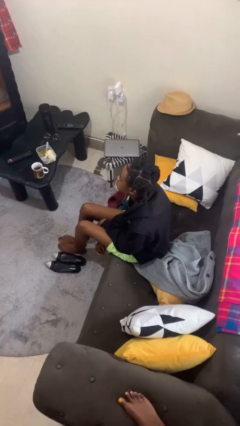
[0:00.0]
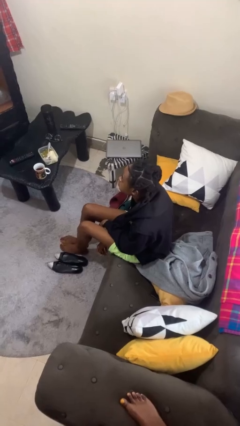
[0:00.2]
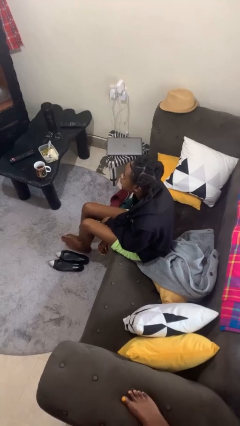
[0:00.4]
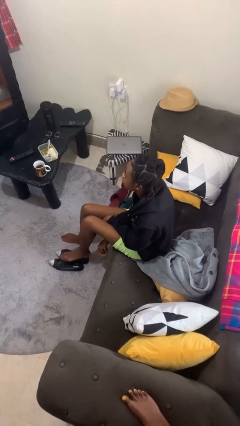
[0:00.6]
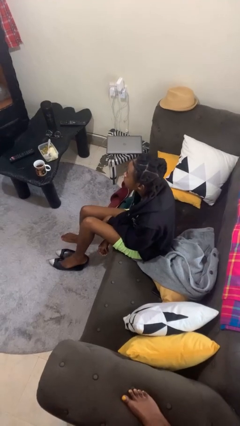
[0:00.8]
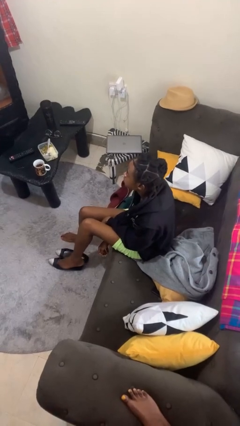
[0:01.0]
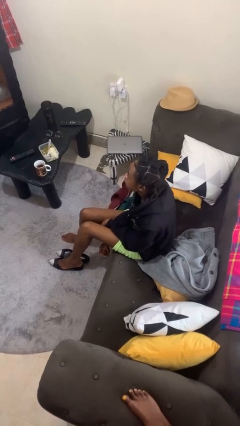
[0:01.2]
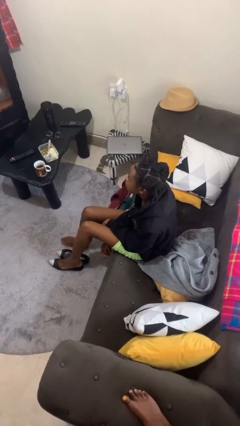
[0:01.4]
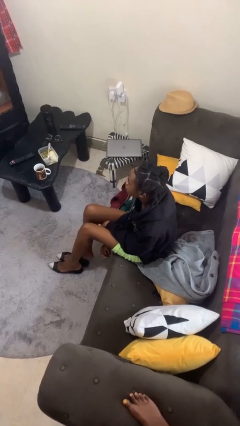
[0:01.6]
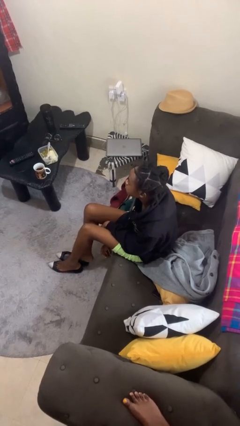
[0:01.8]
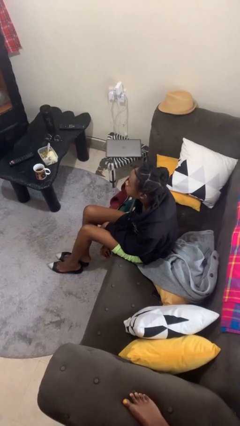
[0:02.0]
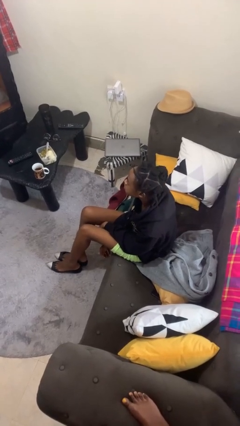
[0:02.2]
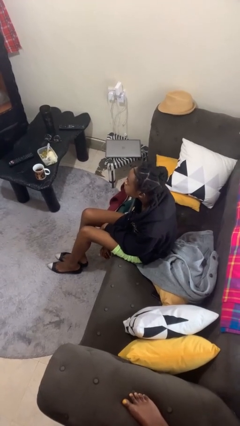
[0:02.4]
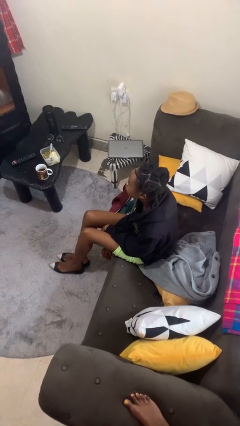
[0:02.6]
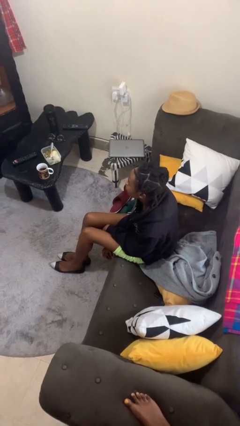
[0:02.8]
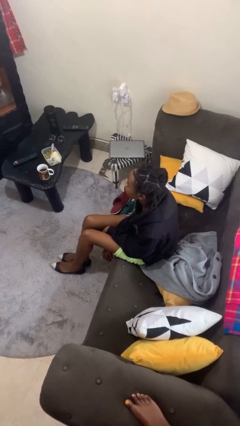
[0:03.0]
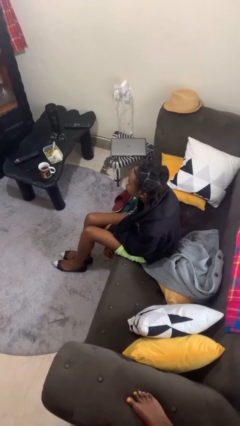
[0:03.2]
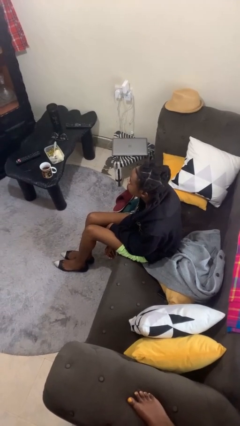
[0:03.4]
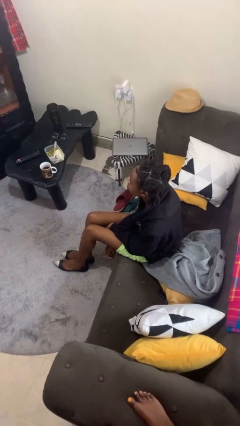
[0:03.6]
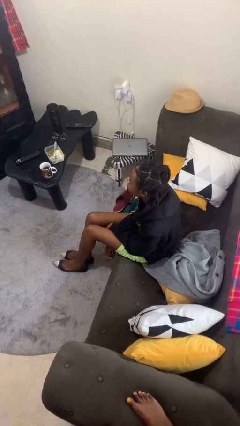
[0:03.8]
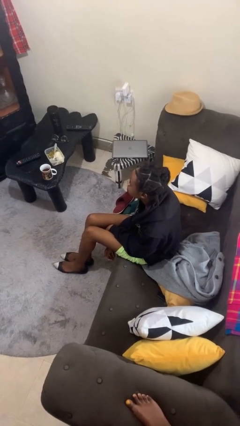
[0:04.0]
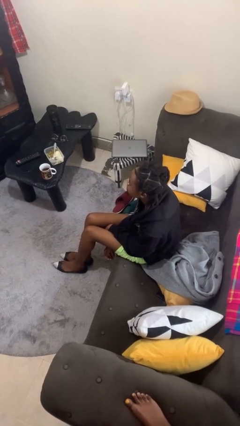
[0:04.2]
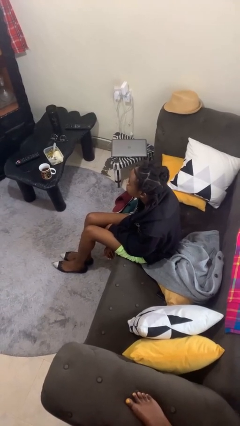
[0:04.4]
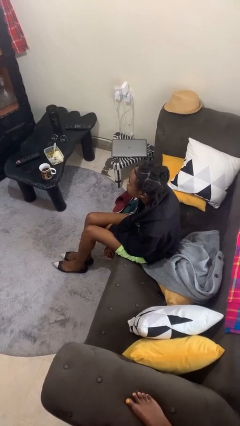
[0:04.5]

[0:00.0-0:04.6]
person puts on shoes

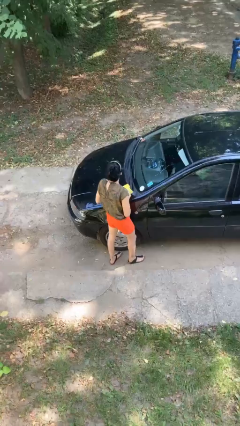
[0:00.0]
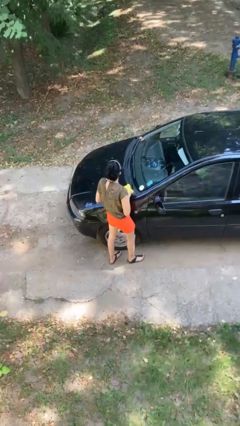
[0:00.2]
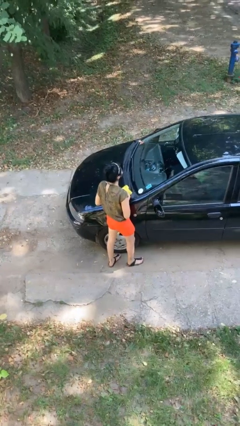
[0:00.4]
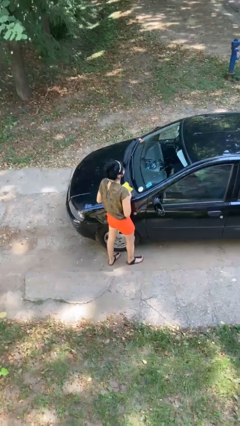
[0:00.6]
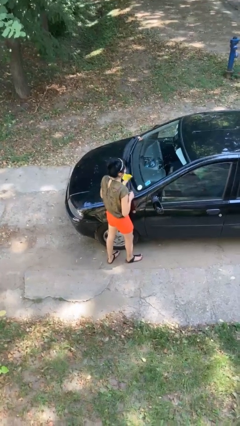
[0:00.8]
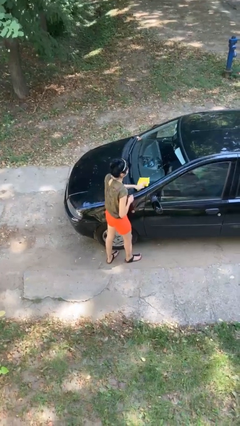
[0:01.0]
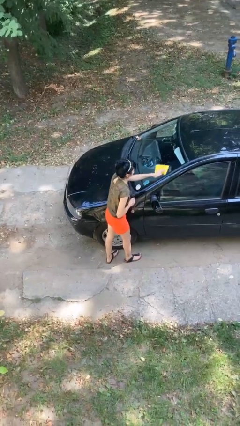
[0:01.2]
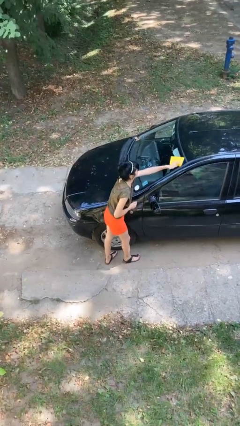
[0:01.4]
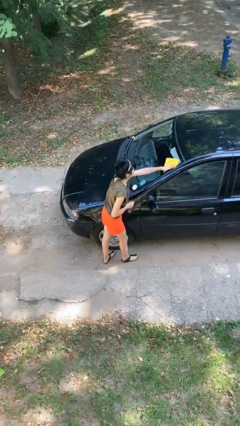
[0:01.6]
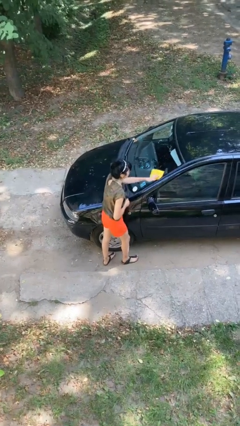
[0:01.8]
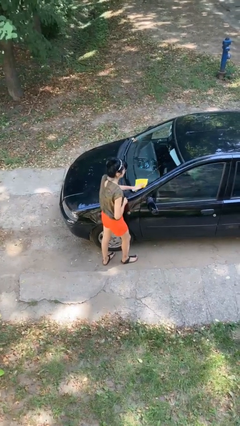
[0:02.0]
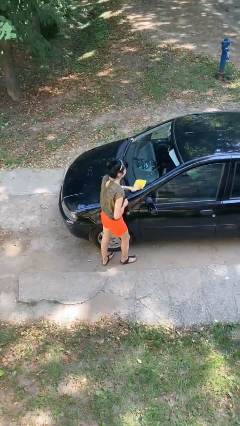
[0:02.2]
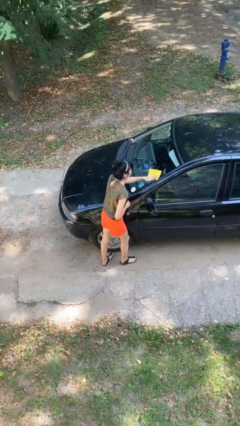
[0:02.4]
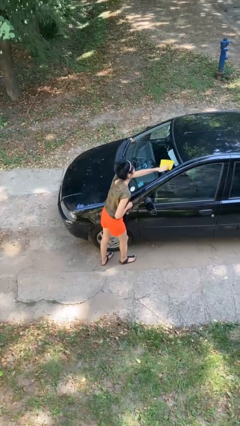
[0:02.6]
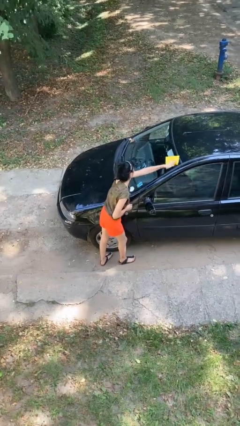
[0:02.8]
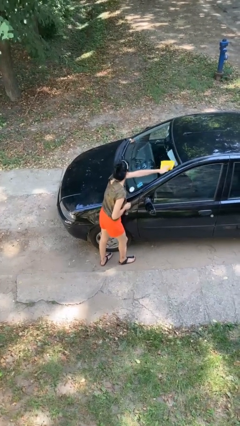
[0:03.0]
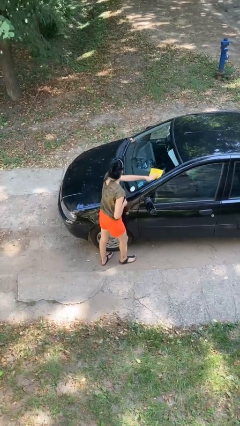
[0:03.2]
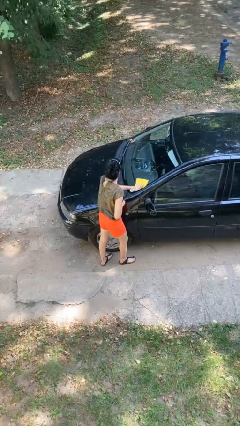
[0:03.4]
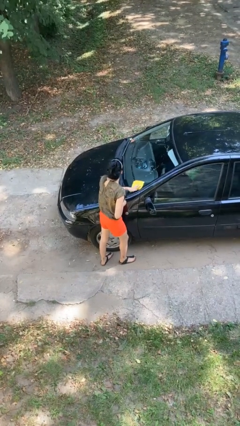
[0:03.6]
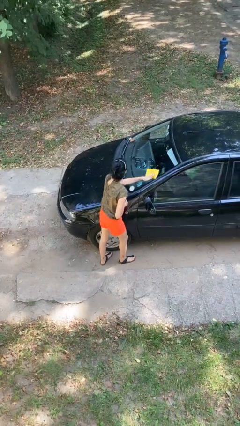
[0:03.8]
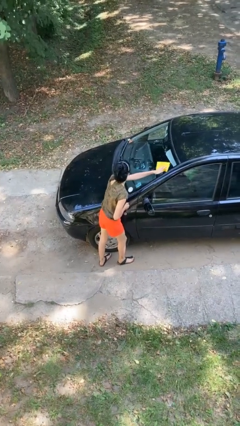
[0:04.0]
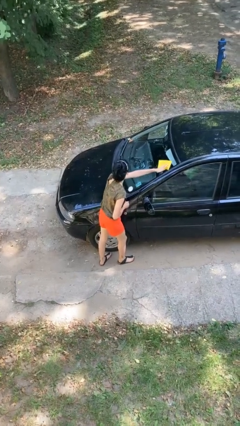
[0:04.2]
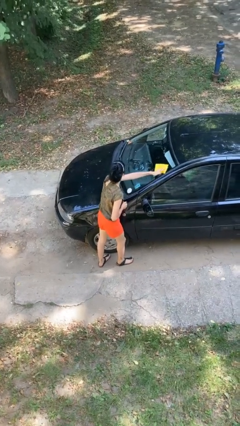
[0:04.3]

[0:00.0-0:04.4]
person polishes car with rag

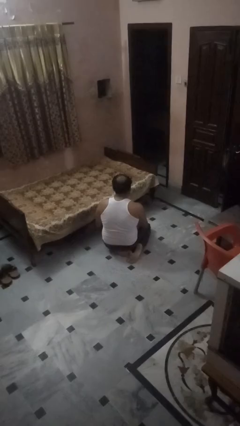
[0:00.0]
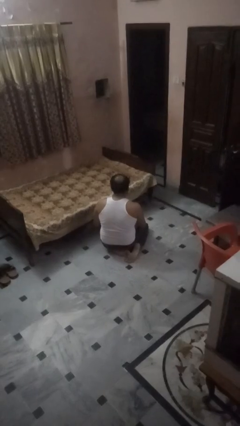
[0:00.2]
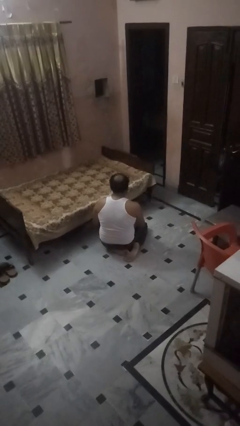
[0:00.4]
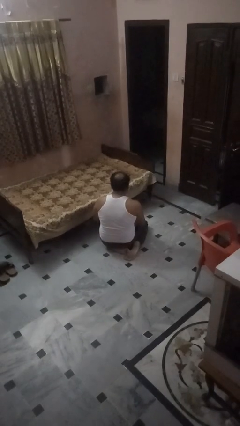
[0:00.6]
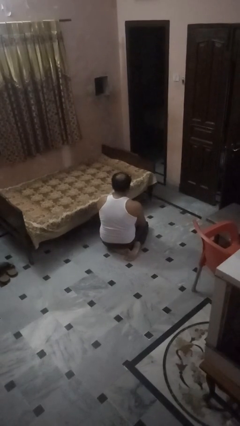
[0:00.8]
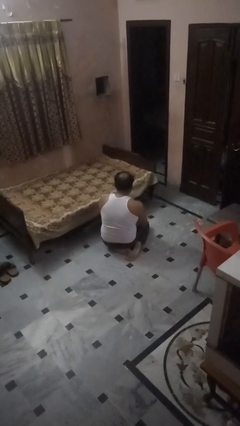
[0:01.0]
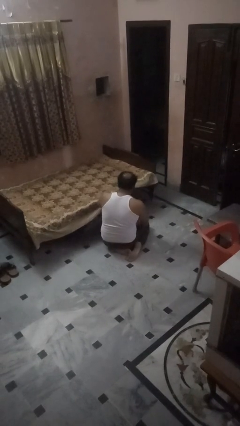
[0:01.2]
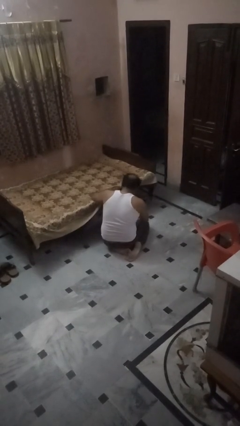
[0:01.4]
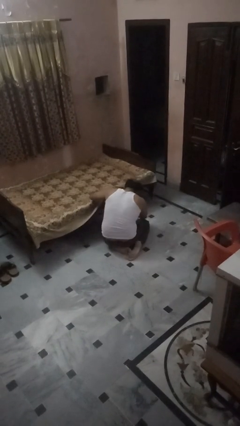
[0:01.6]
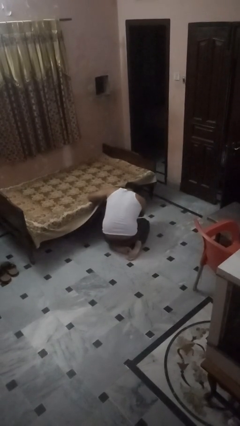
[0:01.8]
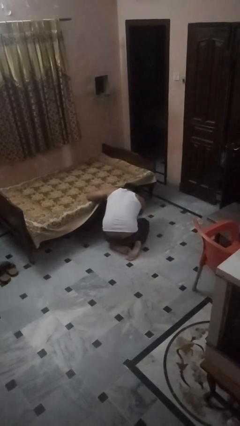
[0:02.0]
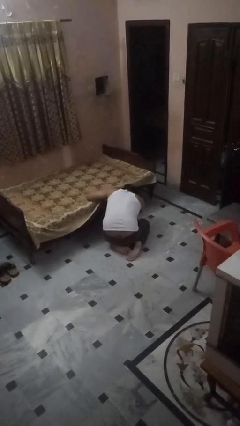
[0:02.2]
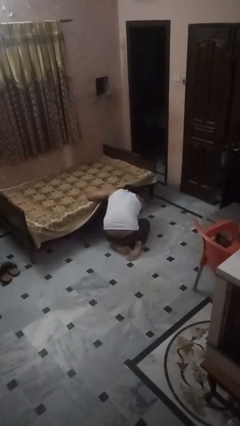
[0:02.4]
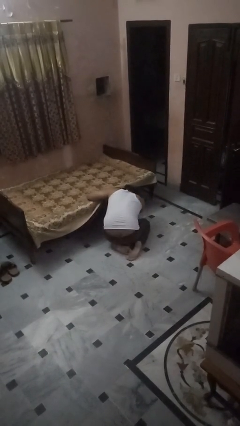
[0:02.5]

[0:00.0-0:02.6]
person searches under bed

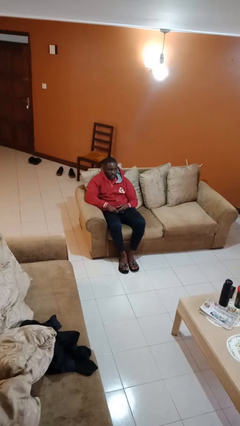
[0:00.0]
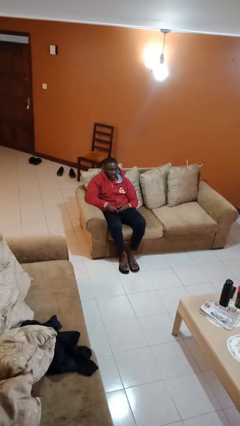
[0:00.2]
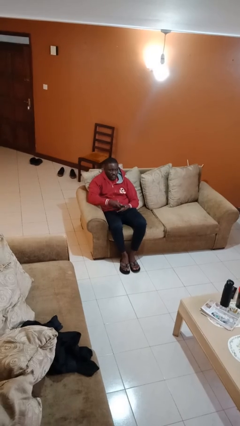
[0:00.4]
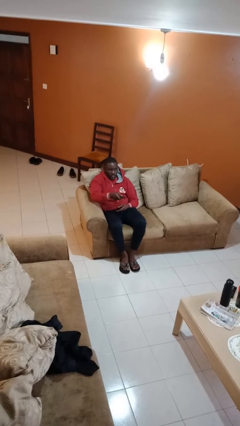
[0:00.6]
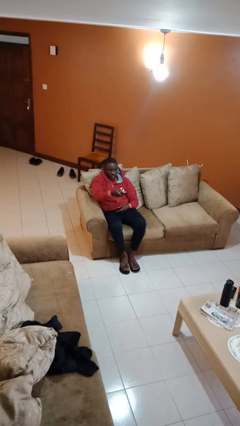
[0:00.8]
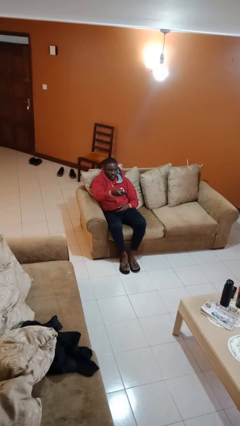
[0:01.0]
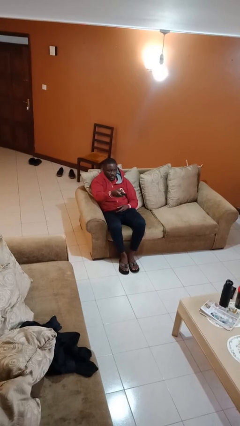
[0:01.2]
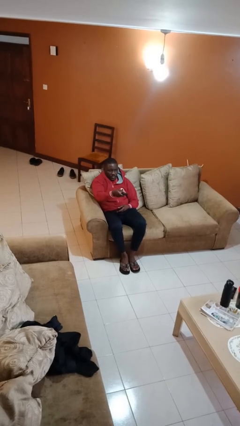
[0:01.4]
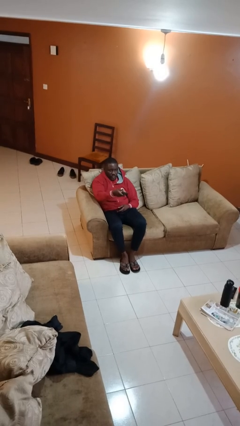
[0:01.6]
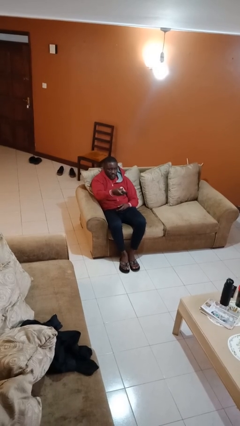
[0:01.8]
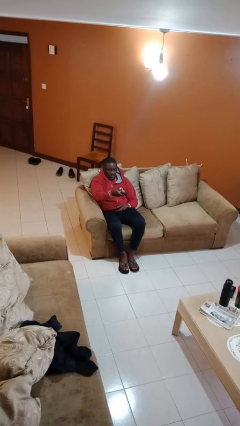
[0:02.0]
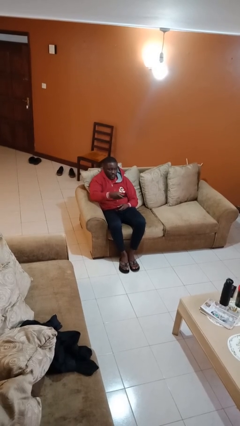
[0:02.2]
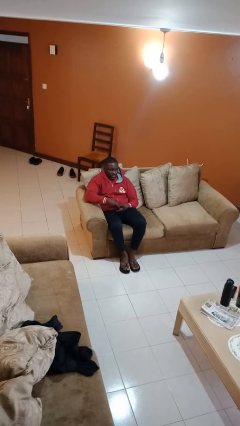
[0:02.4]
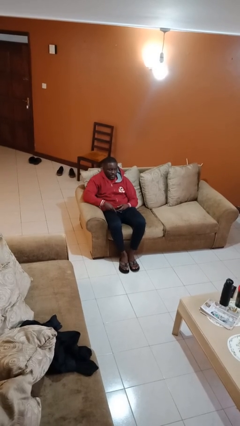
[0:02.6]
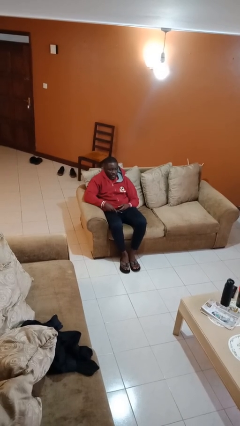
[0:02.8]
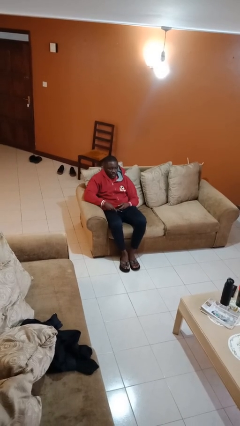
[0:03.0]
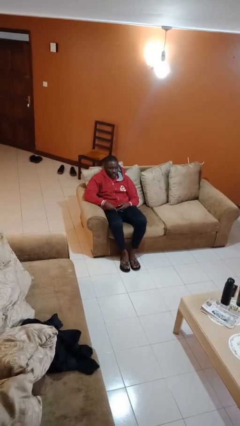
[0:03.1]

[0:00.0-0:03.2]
person uses television remote

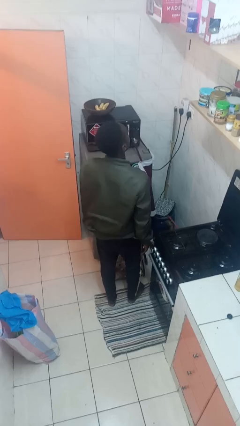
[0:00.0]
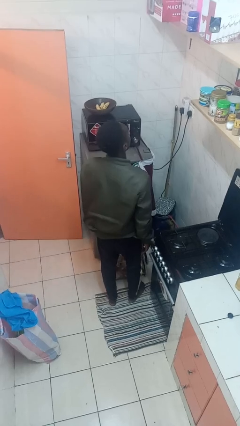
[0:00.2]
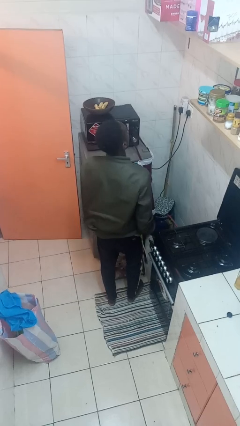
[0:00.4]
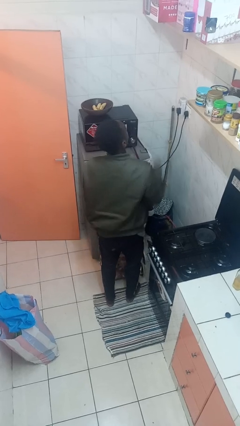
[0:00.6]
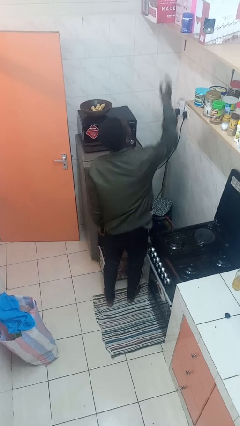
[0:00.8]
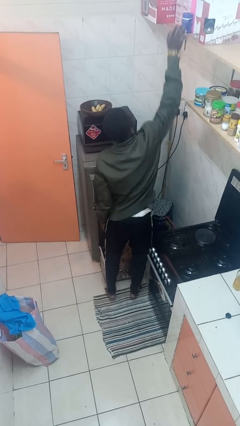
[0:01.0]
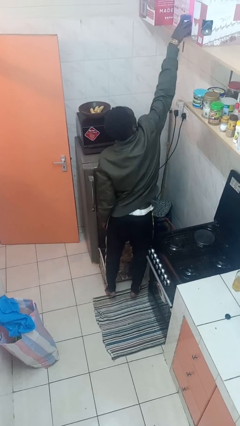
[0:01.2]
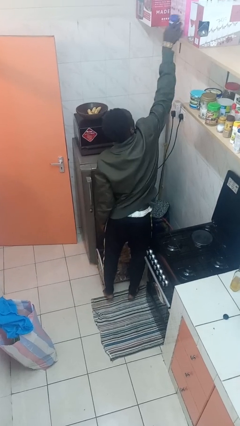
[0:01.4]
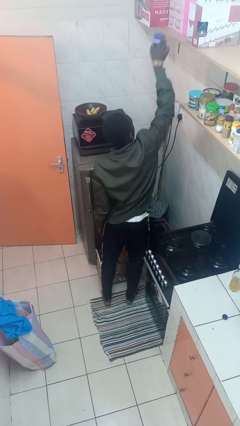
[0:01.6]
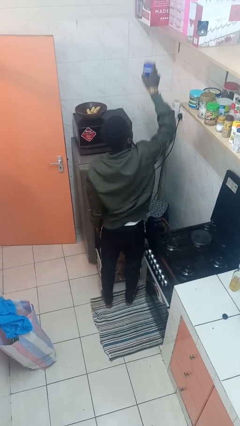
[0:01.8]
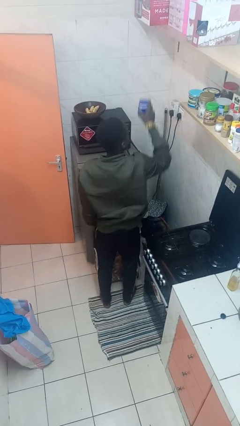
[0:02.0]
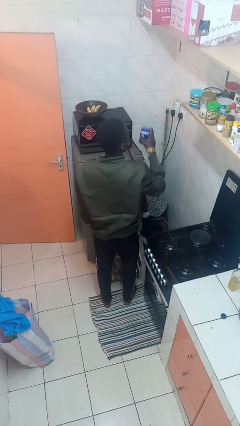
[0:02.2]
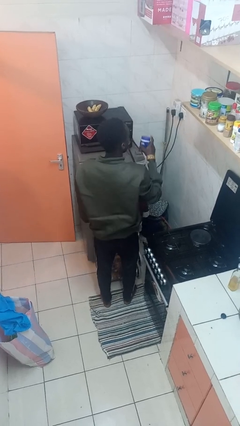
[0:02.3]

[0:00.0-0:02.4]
person picks up object from shelf

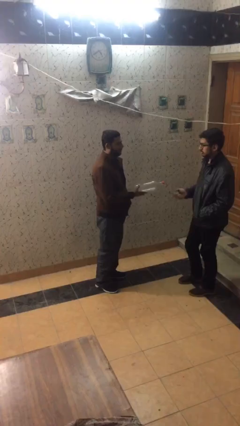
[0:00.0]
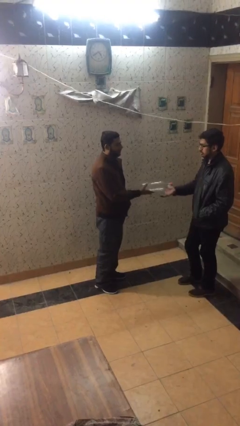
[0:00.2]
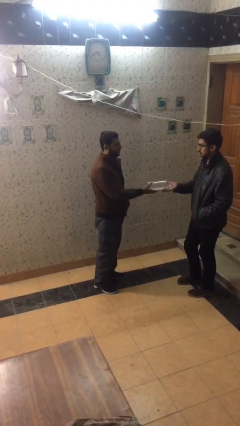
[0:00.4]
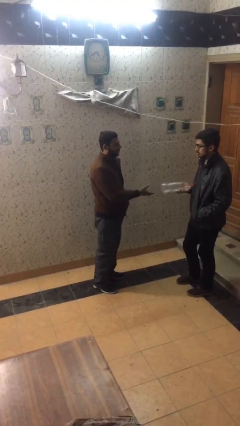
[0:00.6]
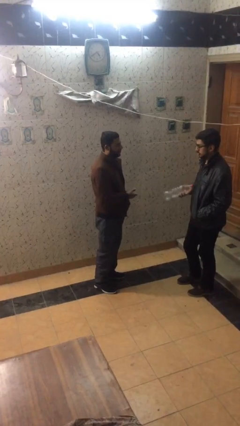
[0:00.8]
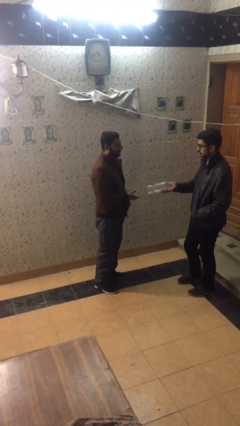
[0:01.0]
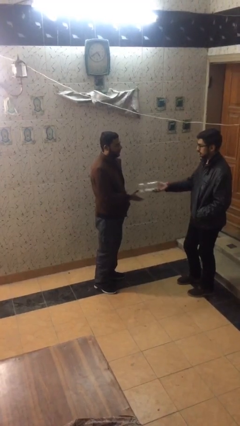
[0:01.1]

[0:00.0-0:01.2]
person transfers object to person
